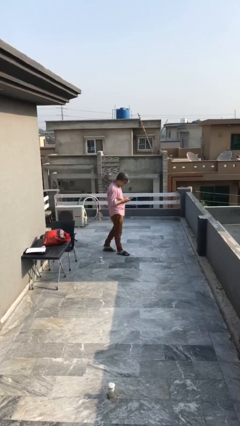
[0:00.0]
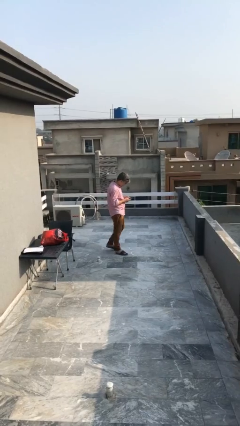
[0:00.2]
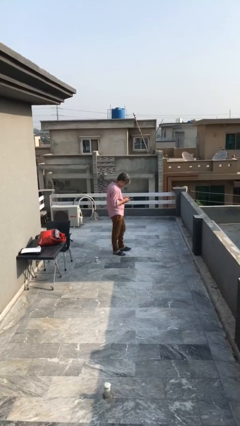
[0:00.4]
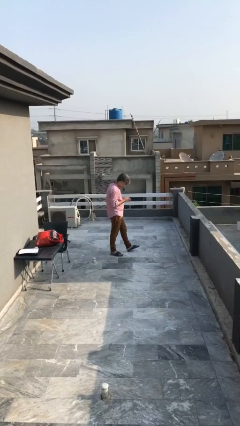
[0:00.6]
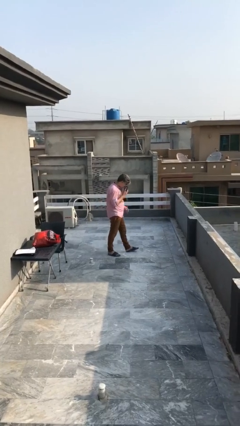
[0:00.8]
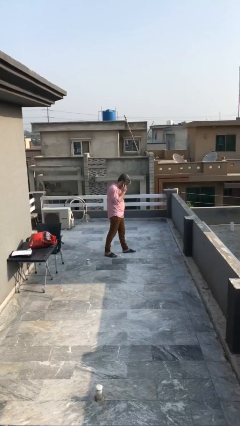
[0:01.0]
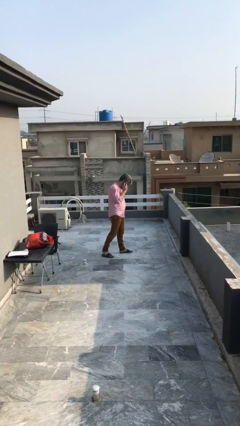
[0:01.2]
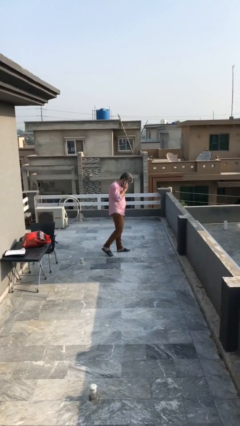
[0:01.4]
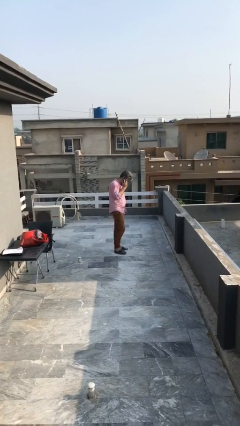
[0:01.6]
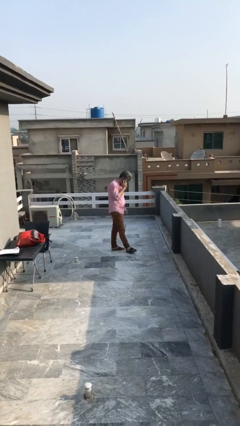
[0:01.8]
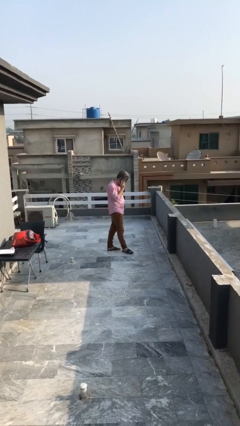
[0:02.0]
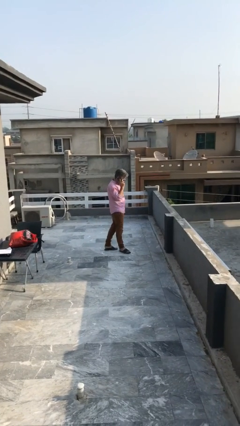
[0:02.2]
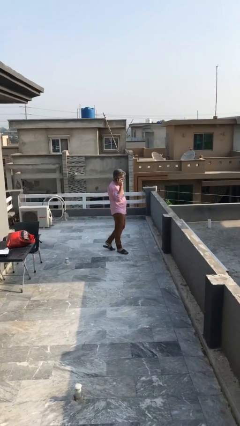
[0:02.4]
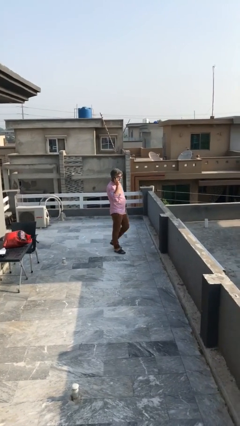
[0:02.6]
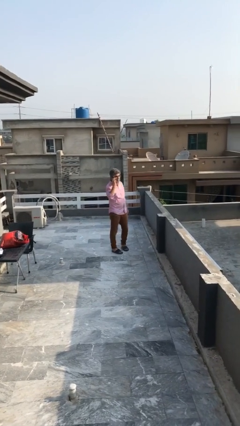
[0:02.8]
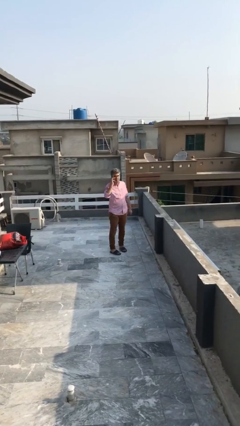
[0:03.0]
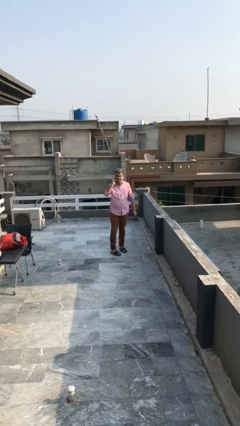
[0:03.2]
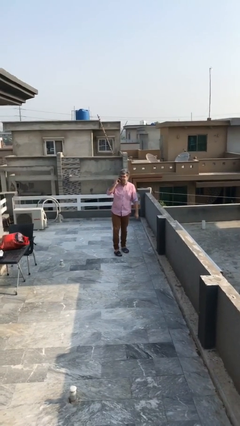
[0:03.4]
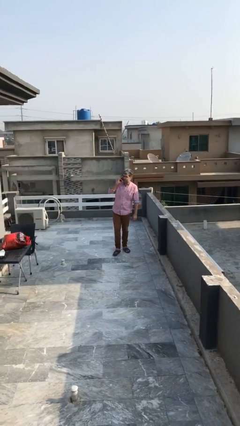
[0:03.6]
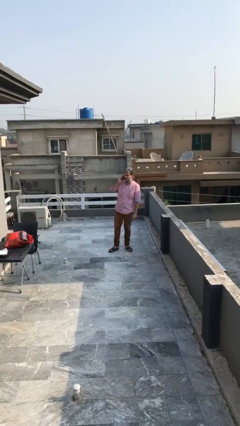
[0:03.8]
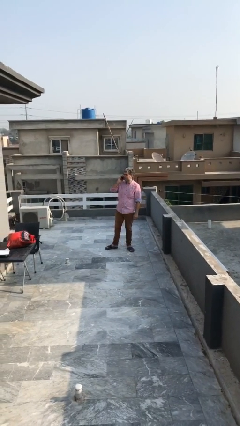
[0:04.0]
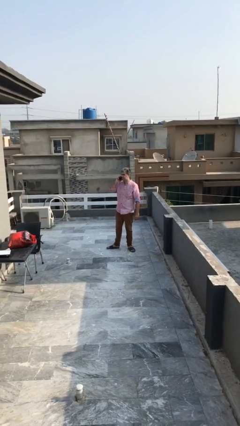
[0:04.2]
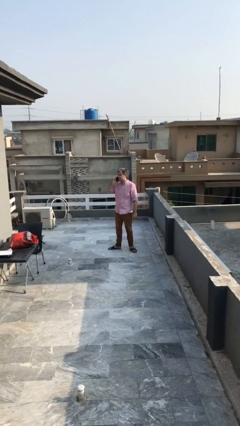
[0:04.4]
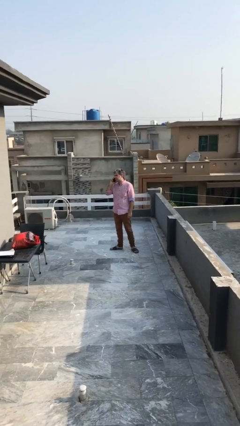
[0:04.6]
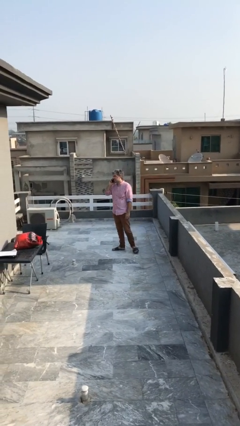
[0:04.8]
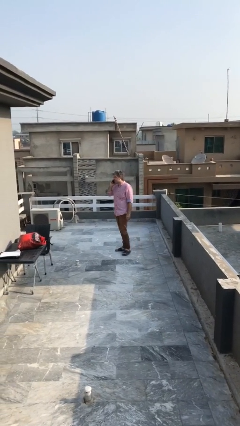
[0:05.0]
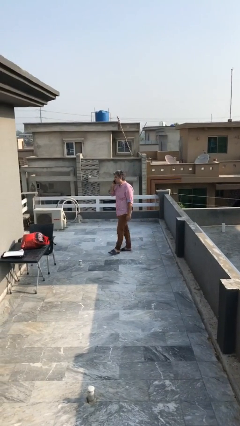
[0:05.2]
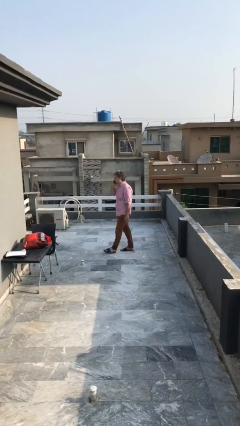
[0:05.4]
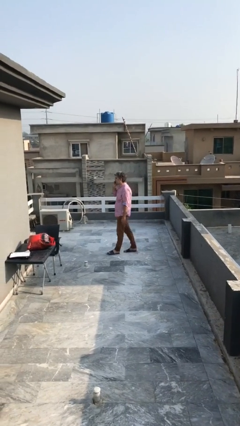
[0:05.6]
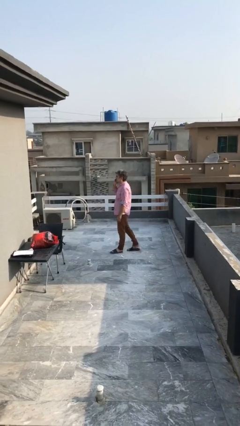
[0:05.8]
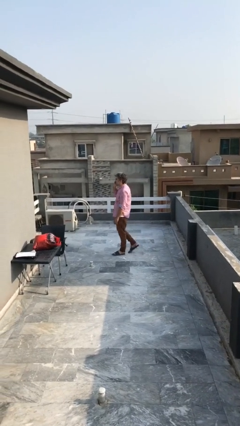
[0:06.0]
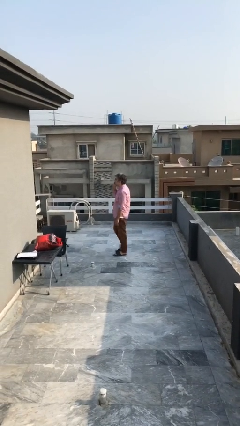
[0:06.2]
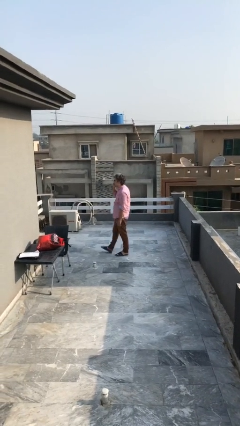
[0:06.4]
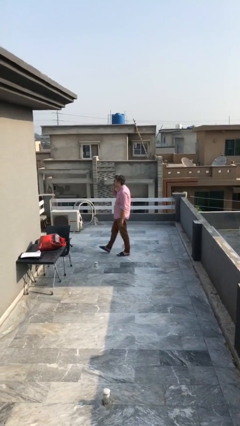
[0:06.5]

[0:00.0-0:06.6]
person talks on phone

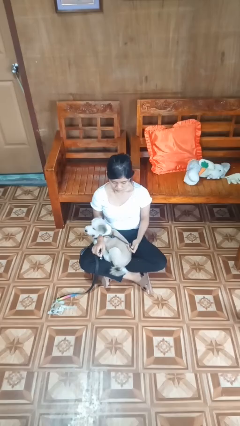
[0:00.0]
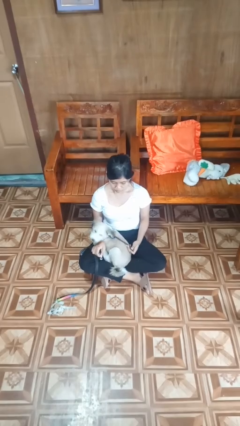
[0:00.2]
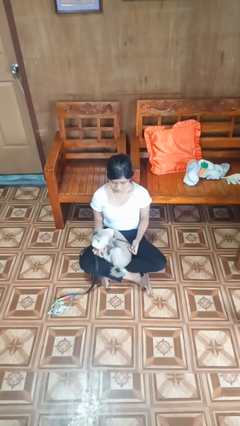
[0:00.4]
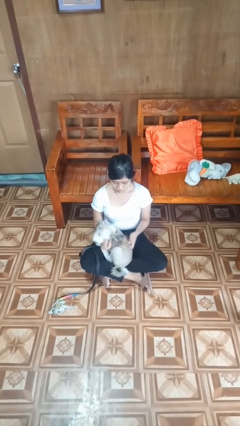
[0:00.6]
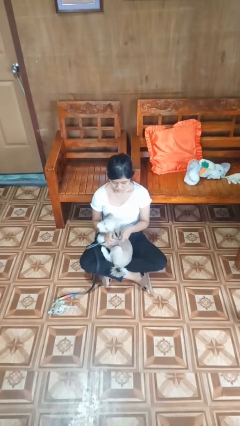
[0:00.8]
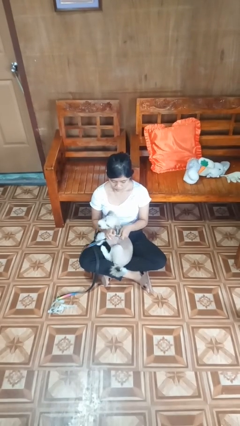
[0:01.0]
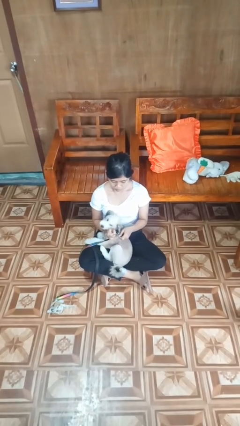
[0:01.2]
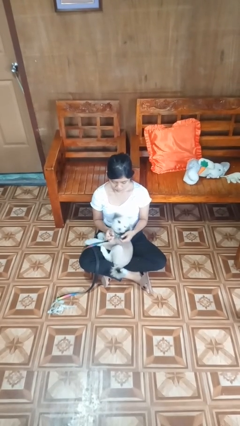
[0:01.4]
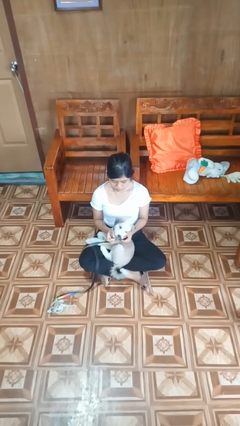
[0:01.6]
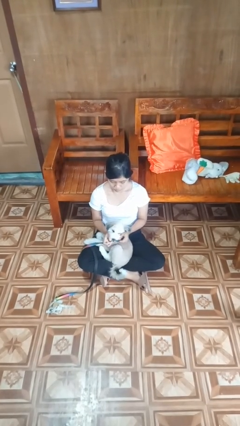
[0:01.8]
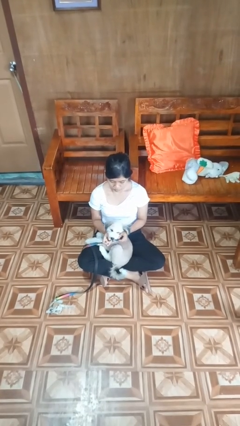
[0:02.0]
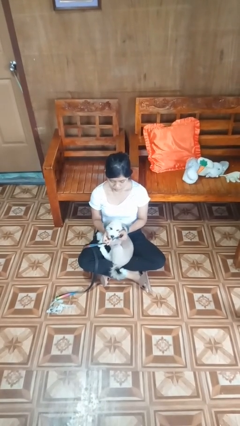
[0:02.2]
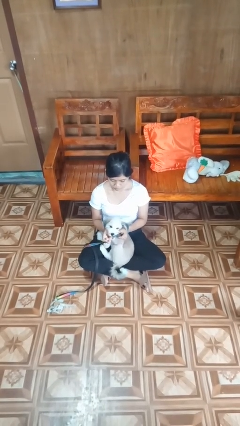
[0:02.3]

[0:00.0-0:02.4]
person attaches leash to dog

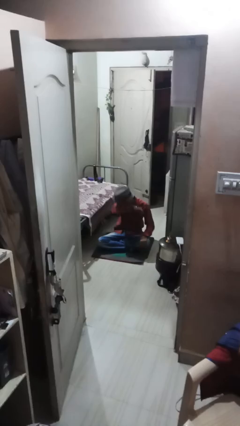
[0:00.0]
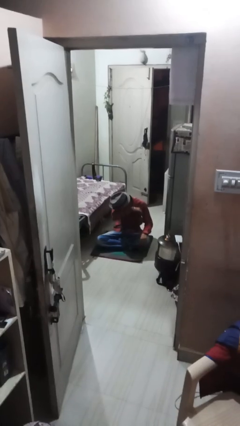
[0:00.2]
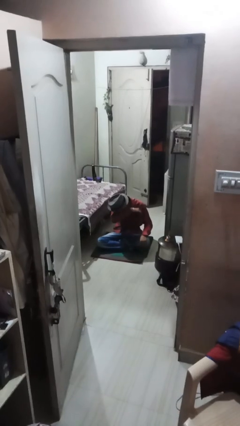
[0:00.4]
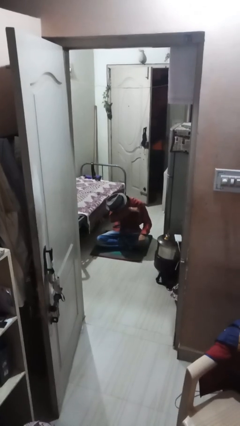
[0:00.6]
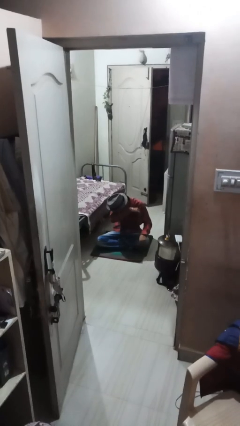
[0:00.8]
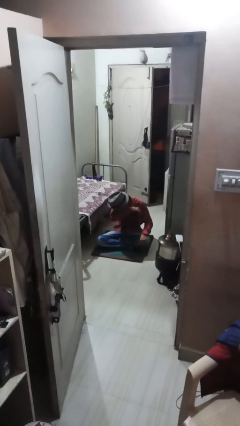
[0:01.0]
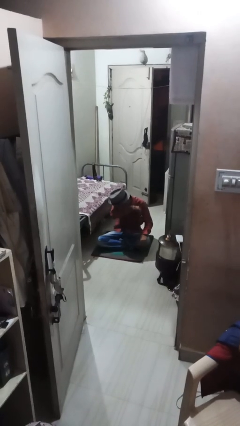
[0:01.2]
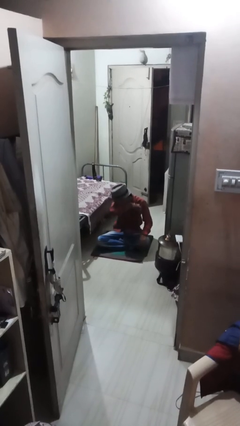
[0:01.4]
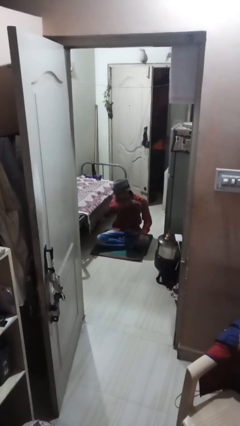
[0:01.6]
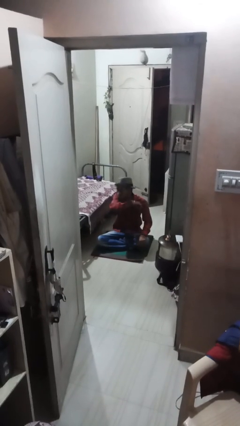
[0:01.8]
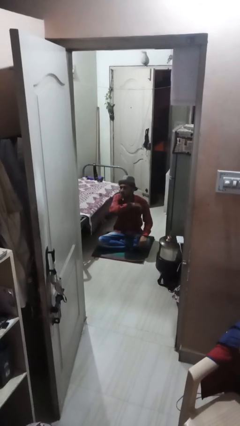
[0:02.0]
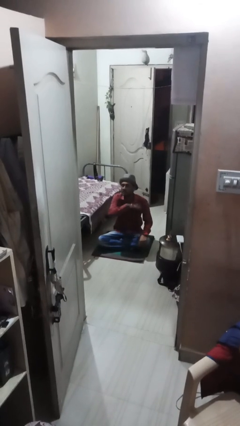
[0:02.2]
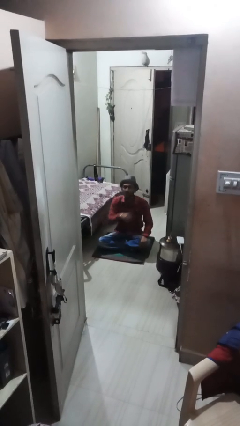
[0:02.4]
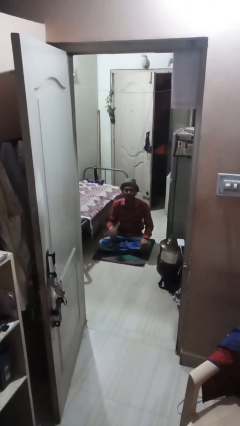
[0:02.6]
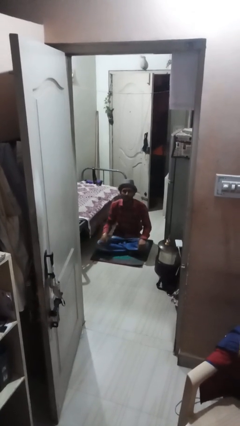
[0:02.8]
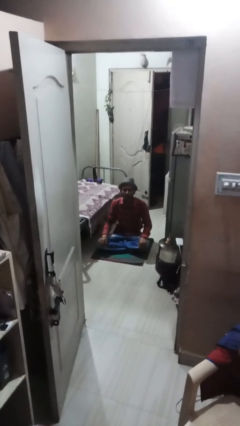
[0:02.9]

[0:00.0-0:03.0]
person sneezes into arm

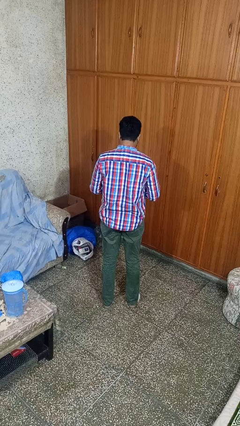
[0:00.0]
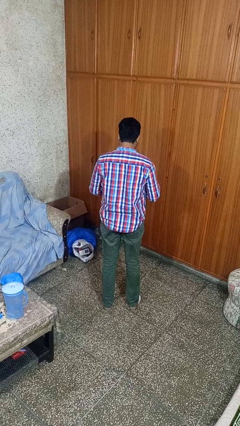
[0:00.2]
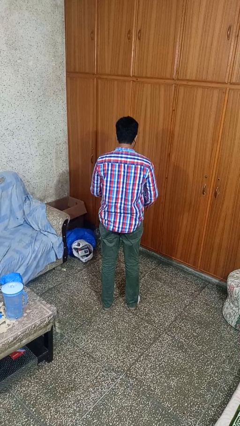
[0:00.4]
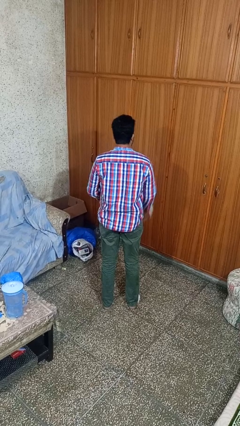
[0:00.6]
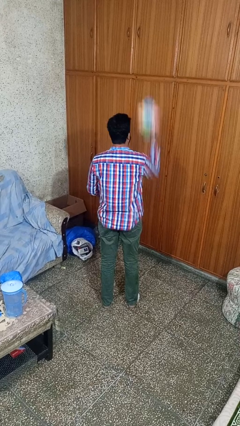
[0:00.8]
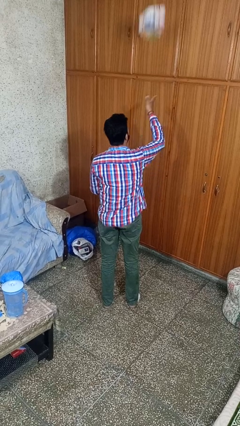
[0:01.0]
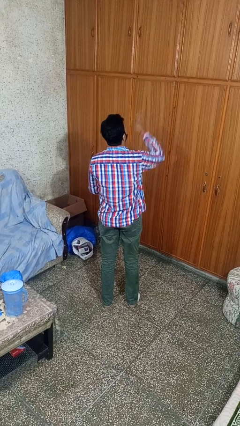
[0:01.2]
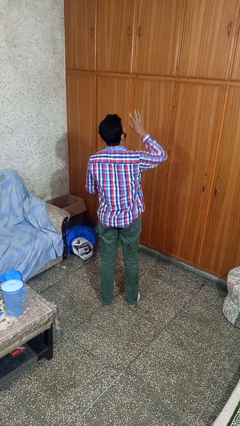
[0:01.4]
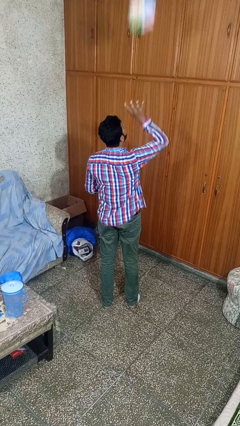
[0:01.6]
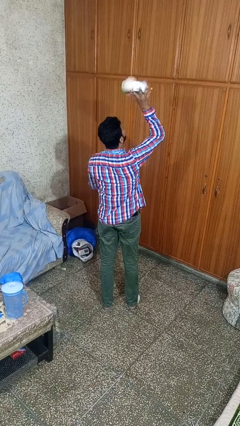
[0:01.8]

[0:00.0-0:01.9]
person drops object

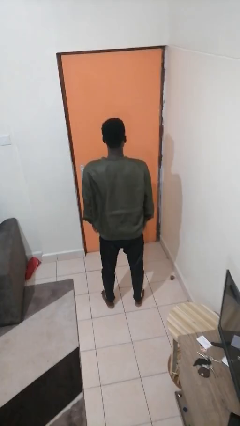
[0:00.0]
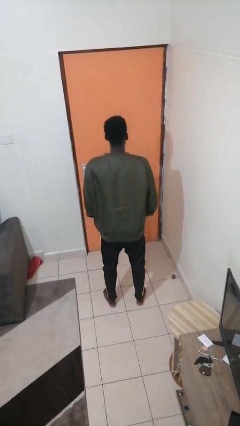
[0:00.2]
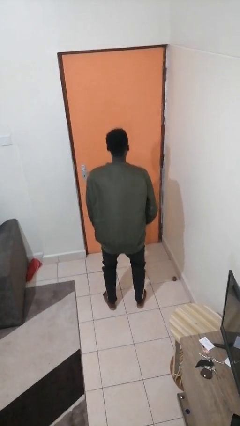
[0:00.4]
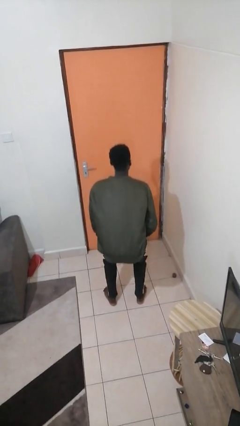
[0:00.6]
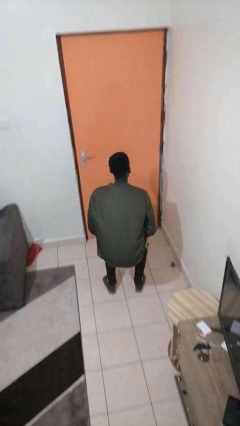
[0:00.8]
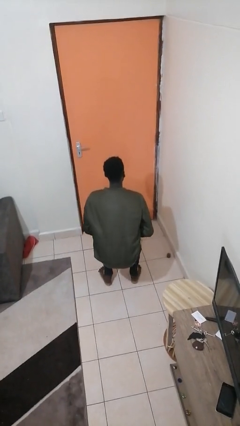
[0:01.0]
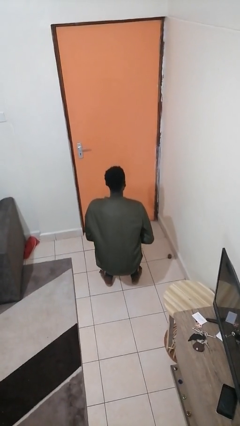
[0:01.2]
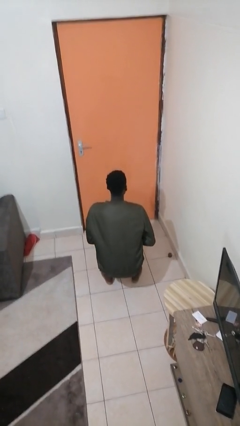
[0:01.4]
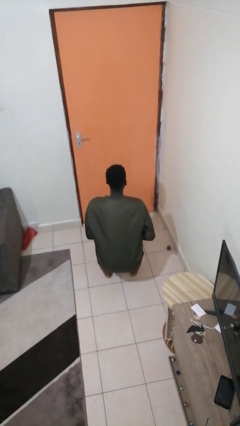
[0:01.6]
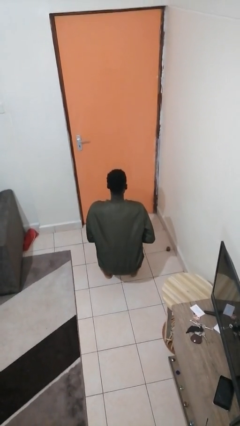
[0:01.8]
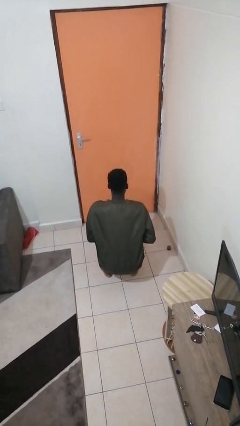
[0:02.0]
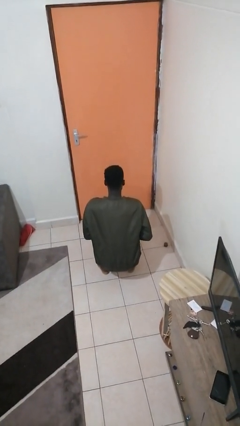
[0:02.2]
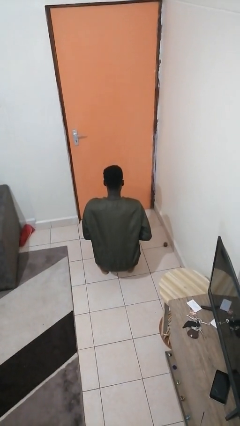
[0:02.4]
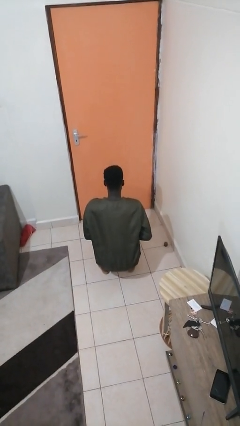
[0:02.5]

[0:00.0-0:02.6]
person squats

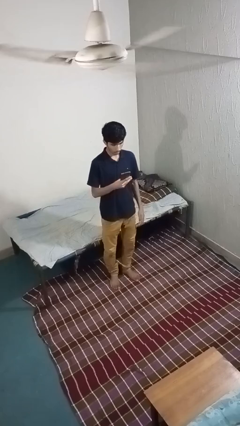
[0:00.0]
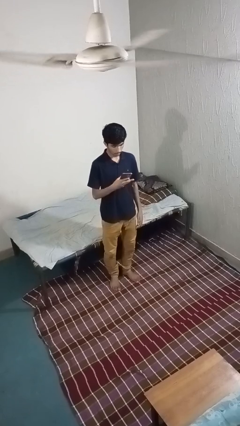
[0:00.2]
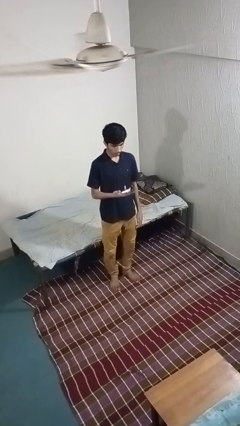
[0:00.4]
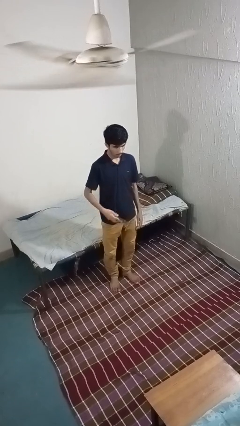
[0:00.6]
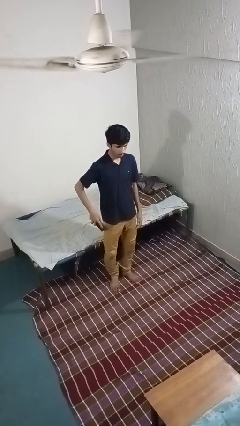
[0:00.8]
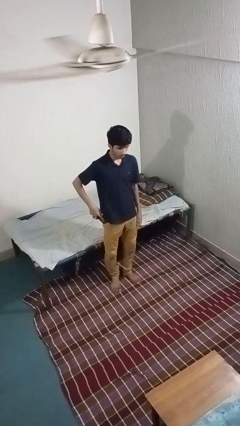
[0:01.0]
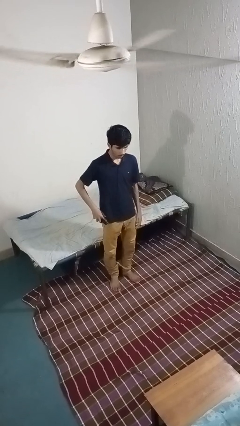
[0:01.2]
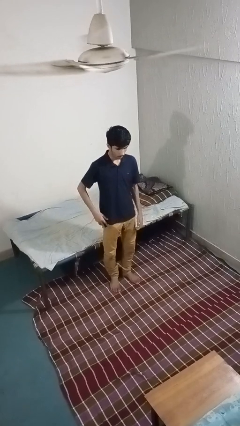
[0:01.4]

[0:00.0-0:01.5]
person puts phone into pocket
